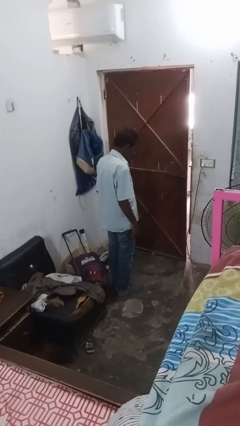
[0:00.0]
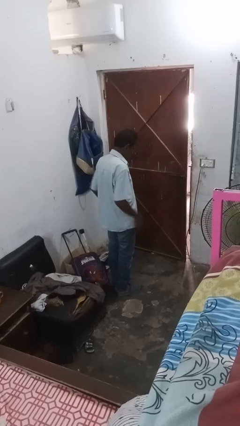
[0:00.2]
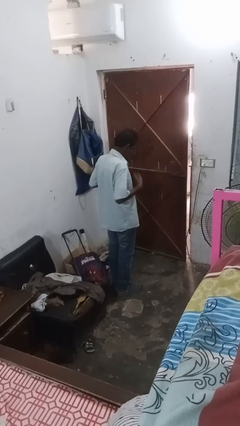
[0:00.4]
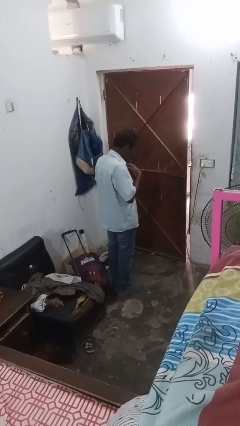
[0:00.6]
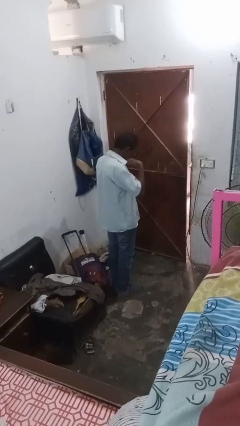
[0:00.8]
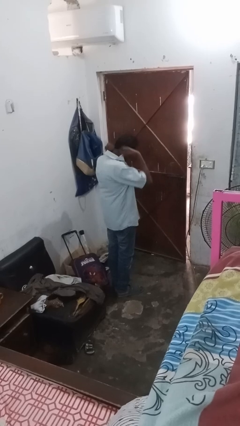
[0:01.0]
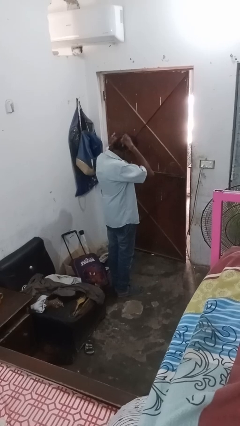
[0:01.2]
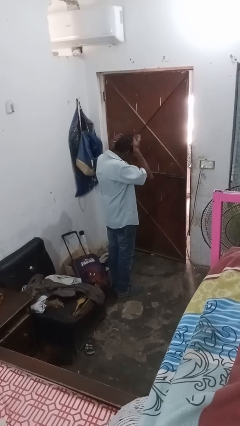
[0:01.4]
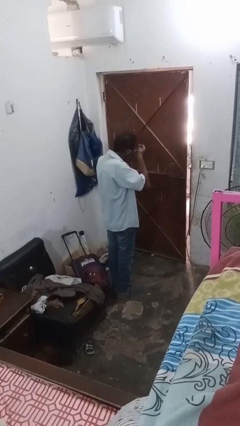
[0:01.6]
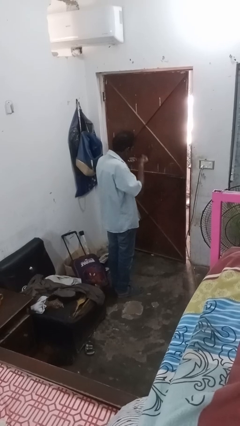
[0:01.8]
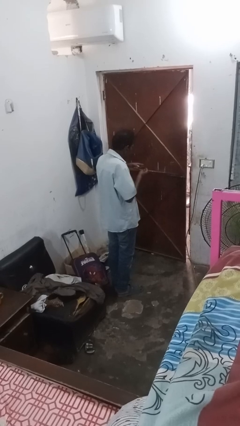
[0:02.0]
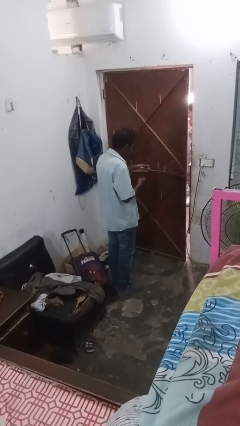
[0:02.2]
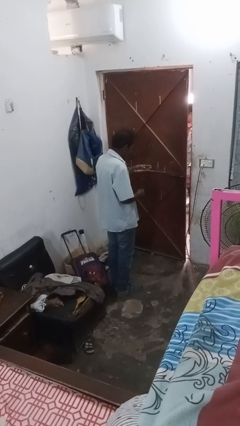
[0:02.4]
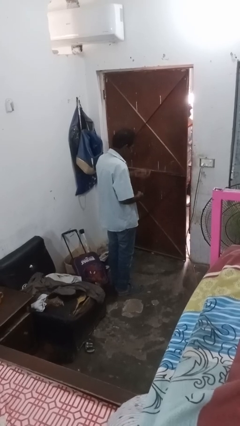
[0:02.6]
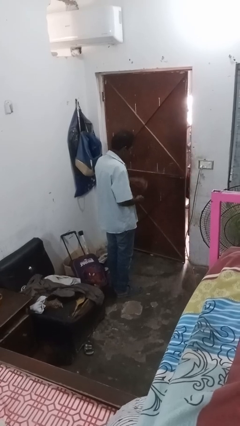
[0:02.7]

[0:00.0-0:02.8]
person takes off necklace

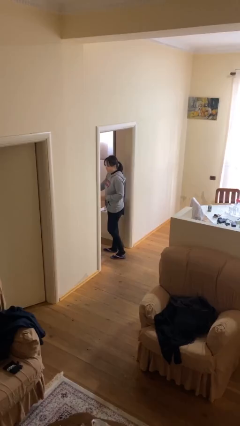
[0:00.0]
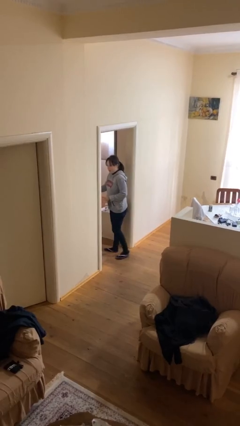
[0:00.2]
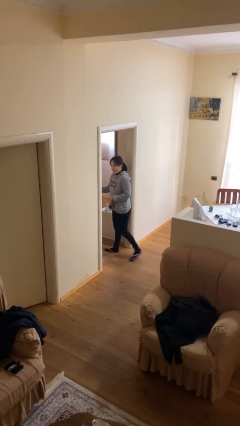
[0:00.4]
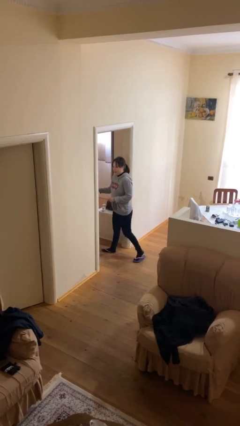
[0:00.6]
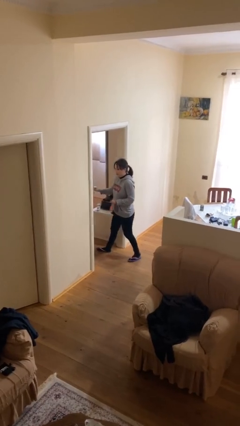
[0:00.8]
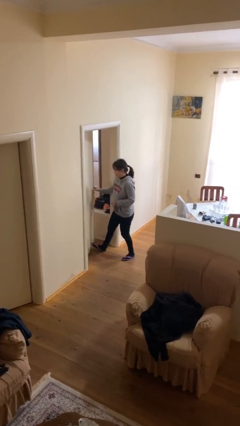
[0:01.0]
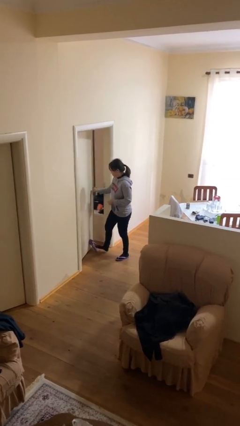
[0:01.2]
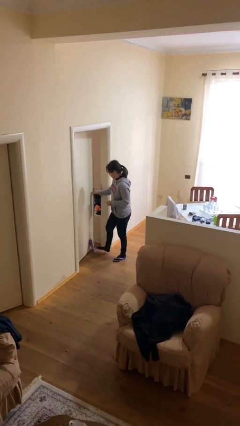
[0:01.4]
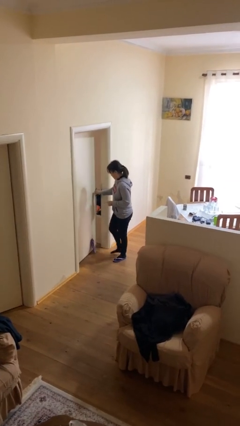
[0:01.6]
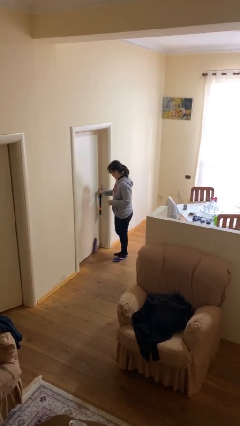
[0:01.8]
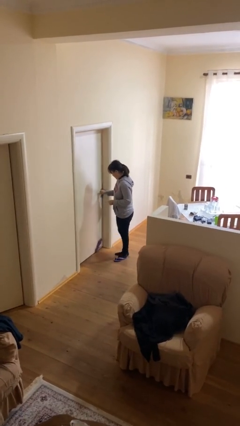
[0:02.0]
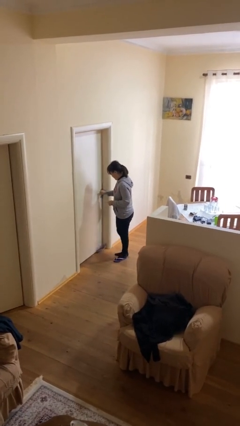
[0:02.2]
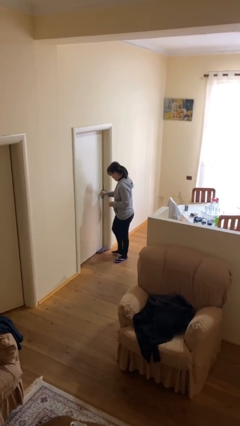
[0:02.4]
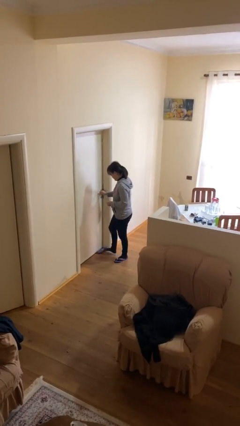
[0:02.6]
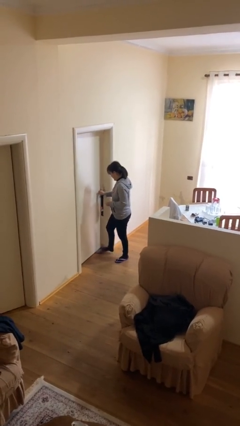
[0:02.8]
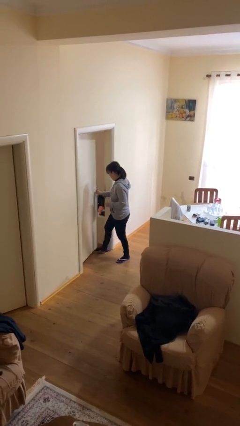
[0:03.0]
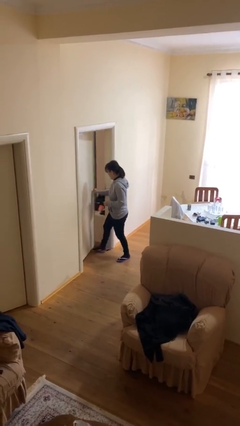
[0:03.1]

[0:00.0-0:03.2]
person closes facility door

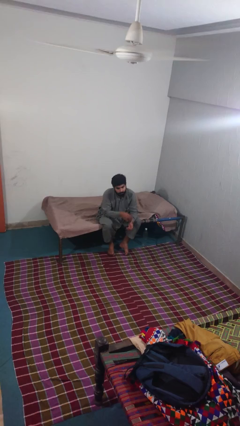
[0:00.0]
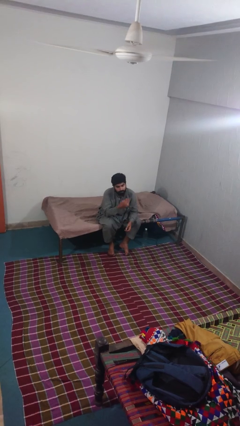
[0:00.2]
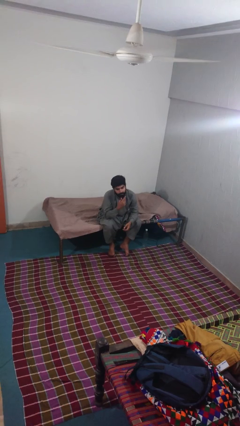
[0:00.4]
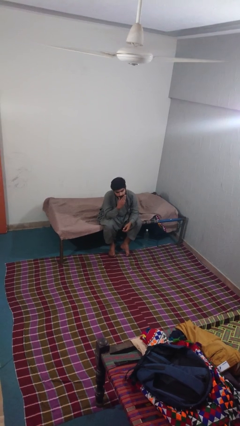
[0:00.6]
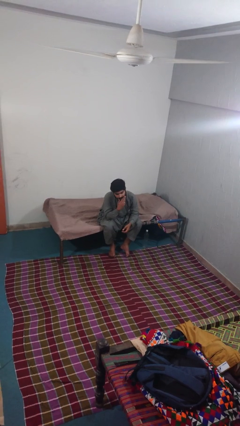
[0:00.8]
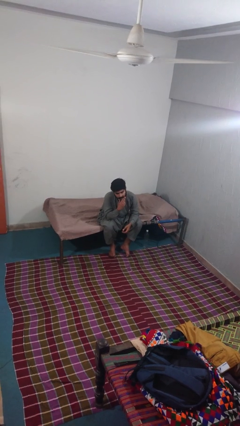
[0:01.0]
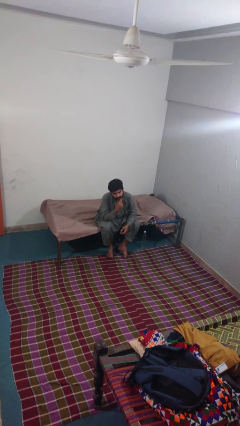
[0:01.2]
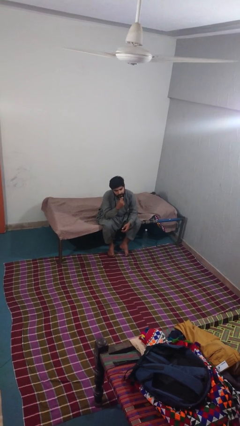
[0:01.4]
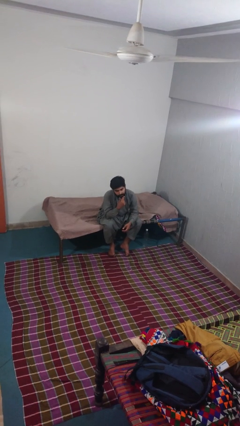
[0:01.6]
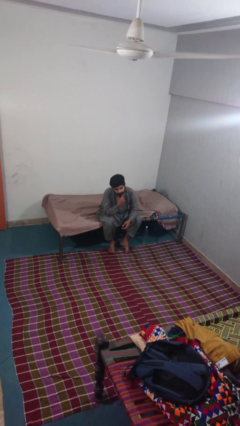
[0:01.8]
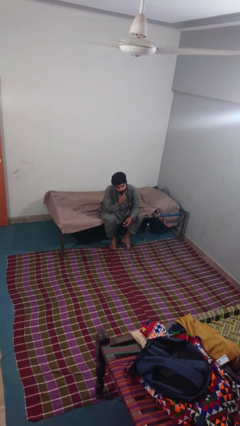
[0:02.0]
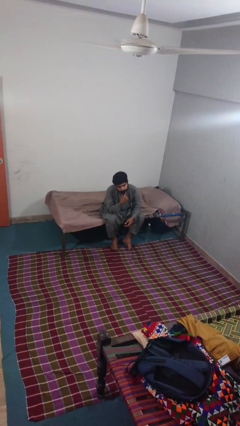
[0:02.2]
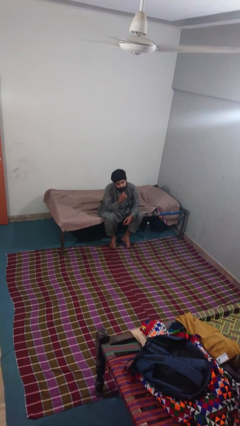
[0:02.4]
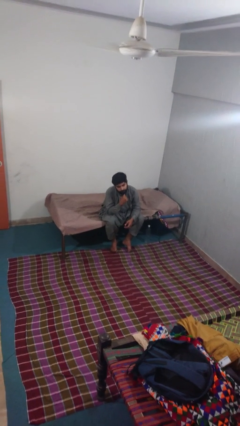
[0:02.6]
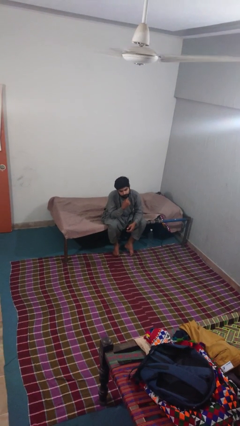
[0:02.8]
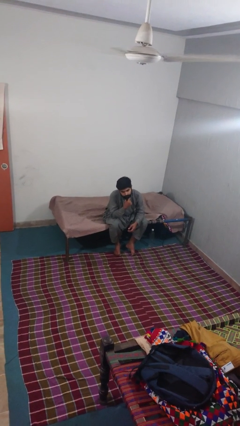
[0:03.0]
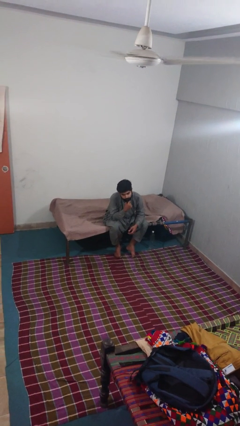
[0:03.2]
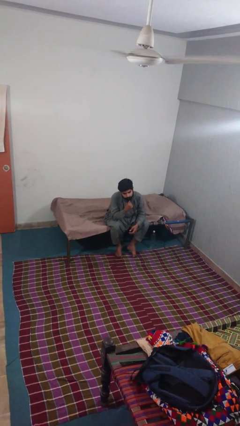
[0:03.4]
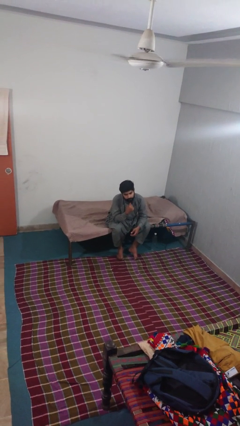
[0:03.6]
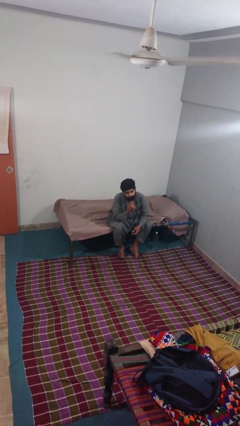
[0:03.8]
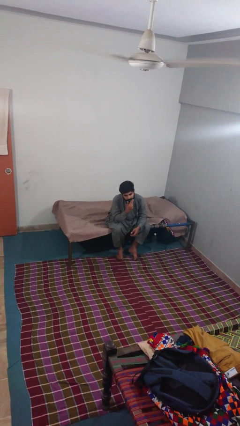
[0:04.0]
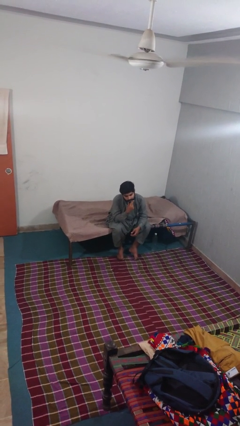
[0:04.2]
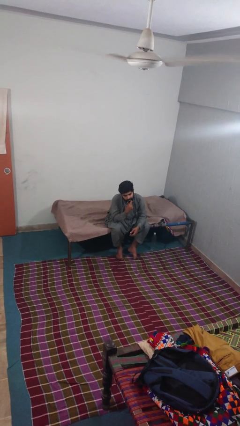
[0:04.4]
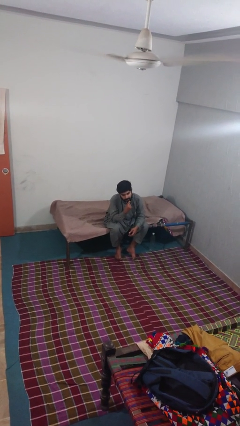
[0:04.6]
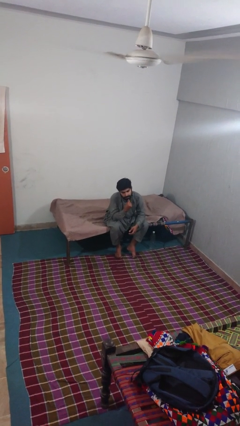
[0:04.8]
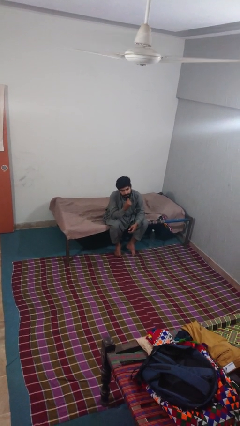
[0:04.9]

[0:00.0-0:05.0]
person strokes chin

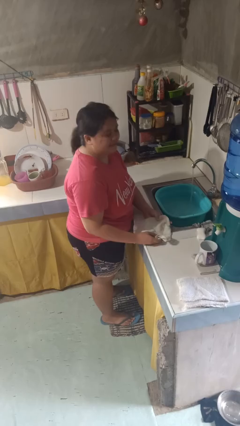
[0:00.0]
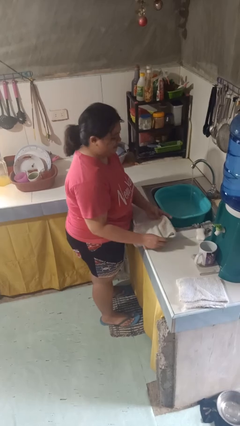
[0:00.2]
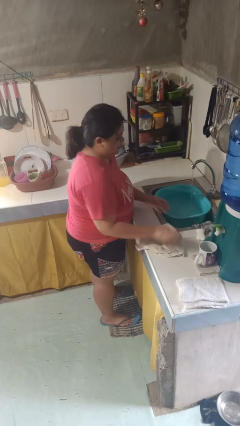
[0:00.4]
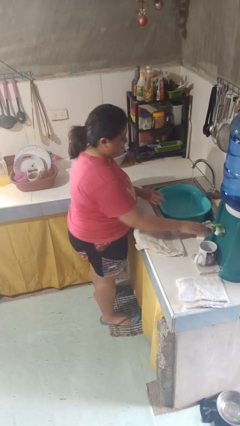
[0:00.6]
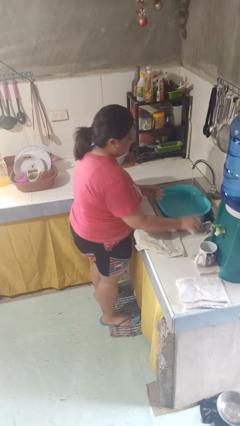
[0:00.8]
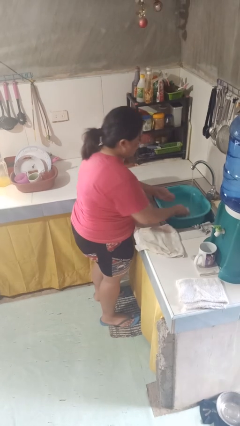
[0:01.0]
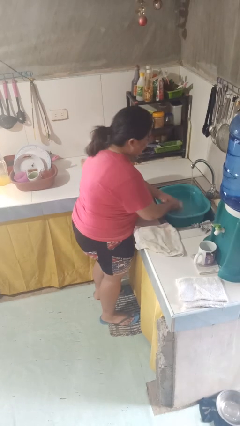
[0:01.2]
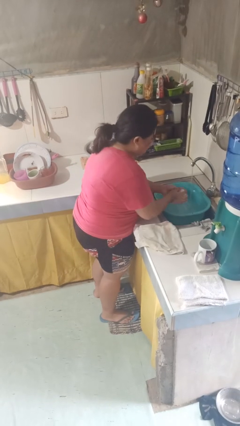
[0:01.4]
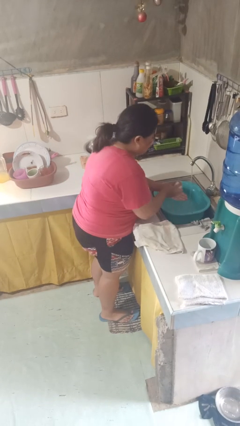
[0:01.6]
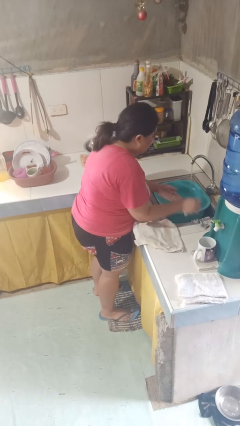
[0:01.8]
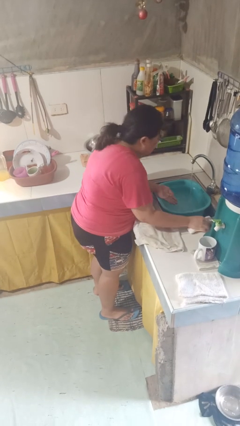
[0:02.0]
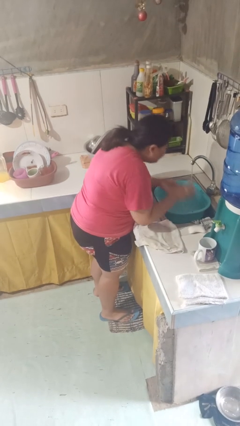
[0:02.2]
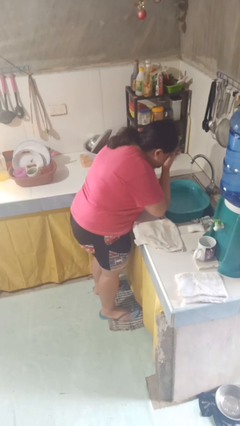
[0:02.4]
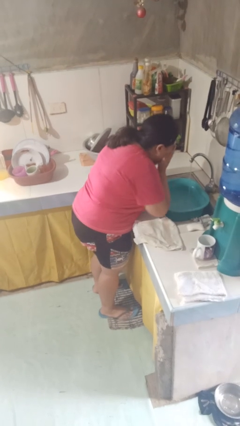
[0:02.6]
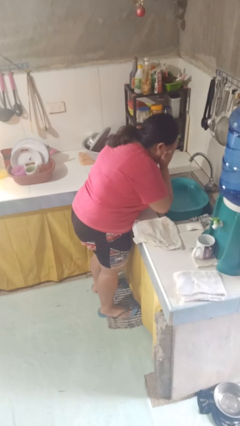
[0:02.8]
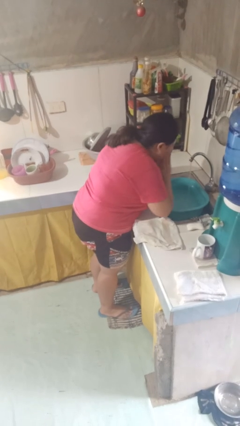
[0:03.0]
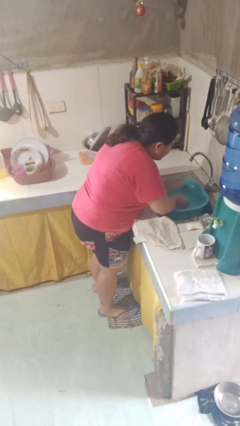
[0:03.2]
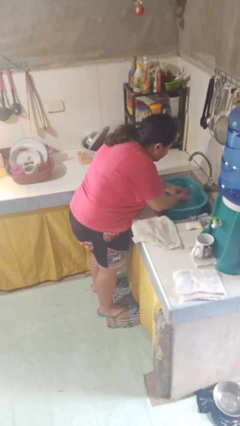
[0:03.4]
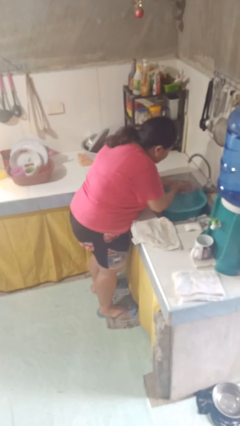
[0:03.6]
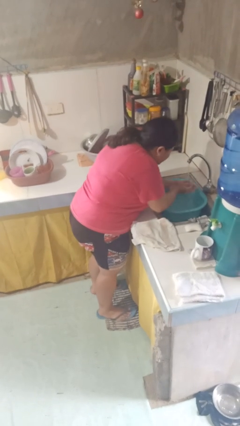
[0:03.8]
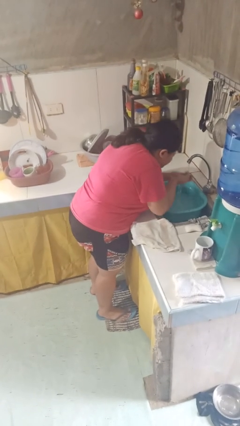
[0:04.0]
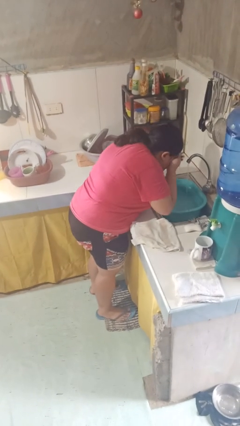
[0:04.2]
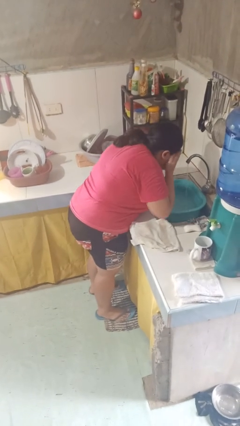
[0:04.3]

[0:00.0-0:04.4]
person washes face

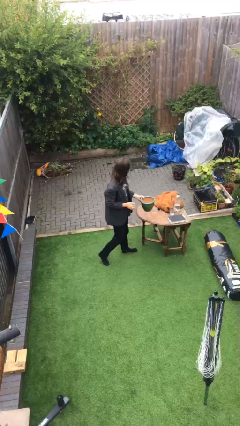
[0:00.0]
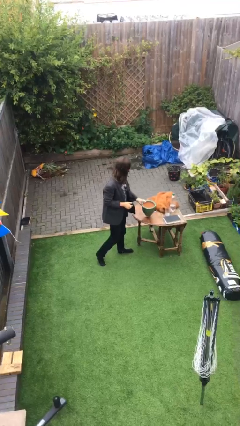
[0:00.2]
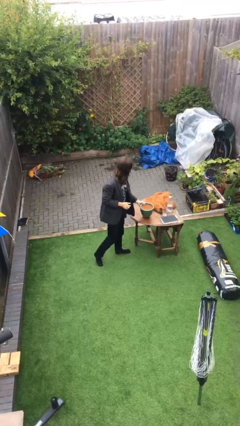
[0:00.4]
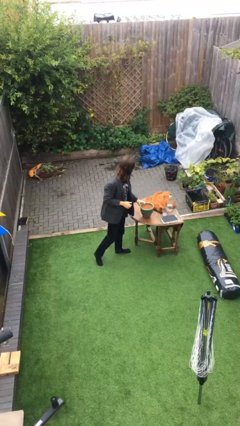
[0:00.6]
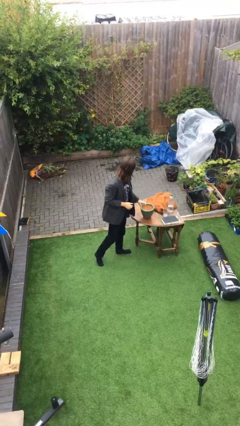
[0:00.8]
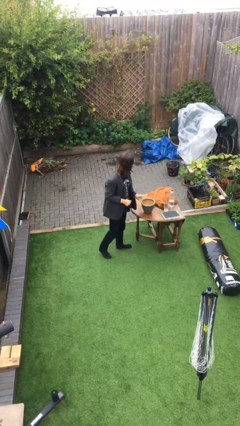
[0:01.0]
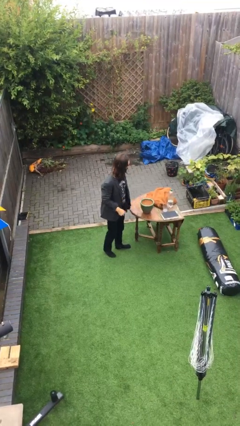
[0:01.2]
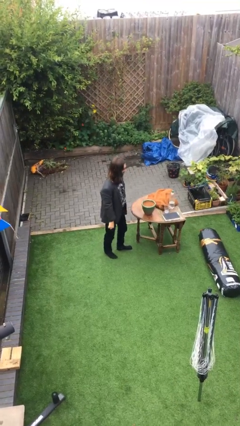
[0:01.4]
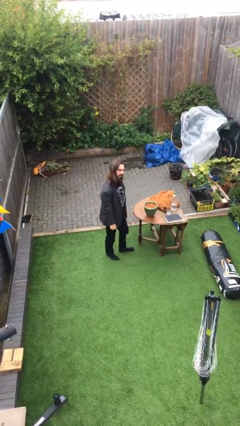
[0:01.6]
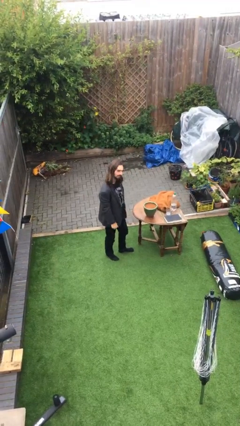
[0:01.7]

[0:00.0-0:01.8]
person puts down object on table
